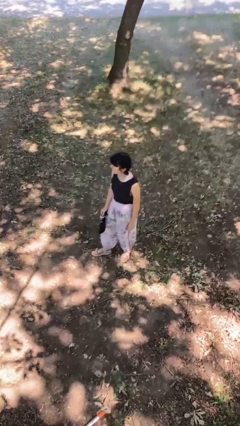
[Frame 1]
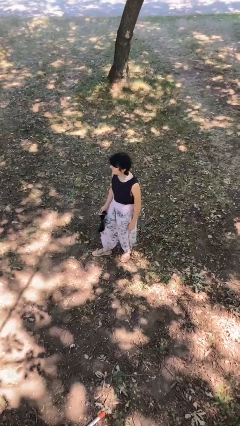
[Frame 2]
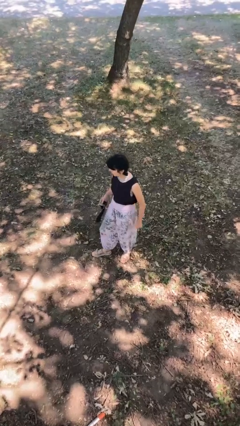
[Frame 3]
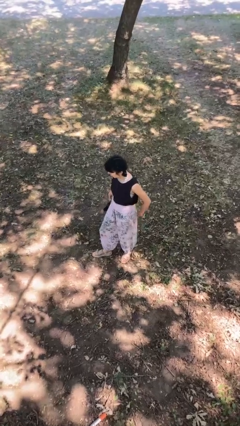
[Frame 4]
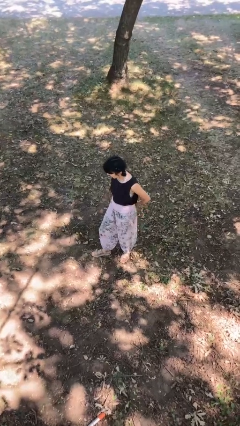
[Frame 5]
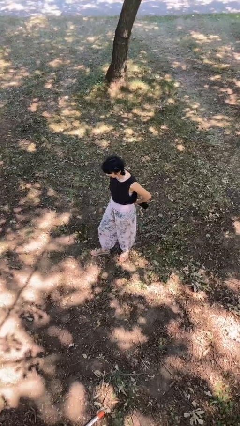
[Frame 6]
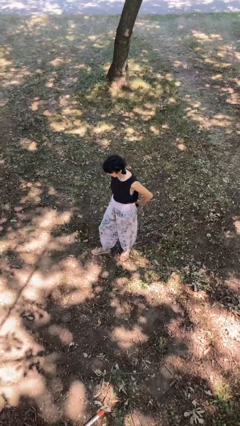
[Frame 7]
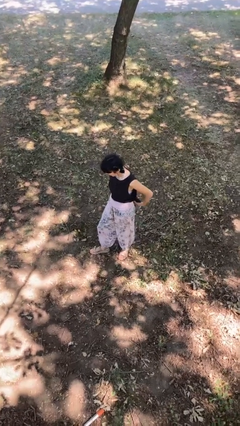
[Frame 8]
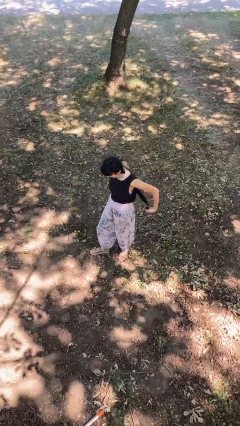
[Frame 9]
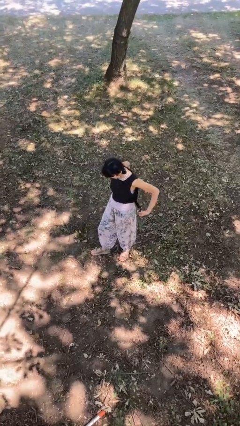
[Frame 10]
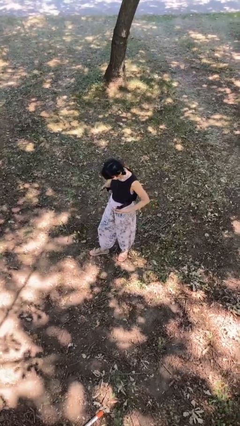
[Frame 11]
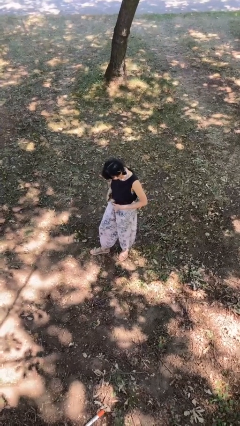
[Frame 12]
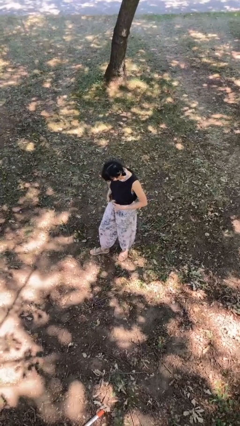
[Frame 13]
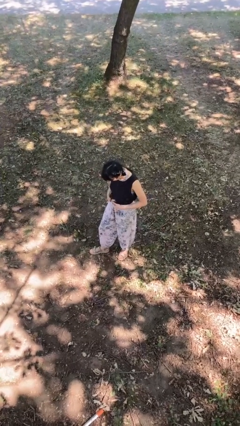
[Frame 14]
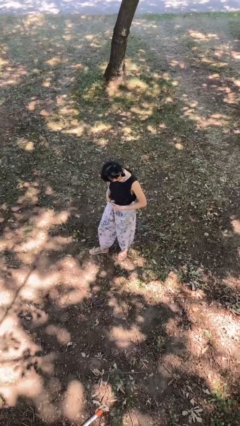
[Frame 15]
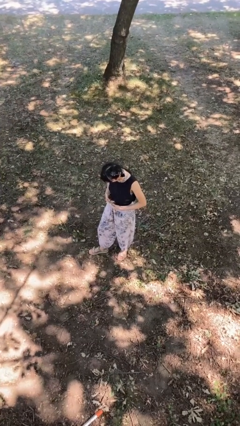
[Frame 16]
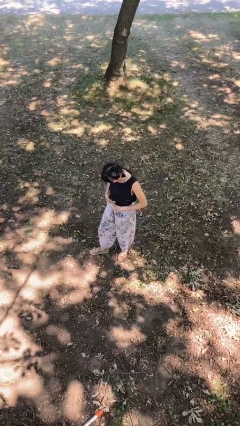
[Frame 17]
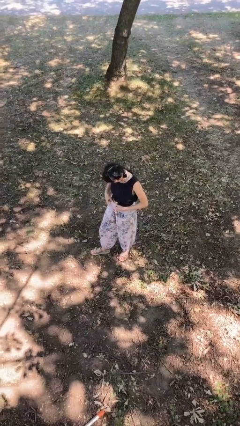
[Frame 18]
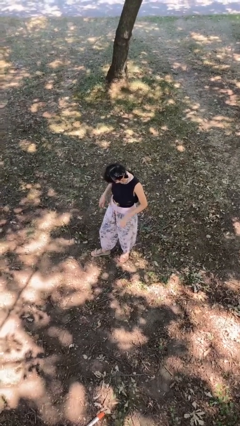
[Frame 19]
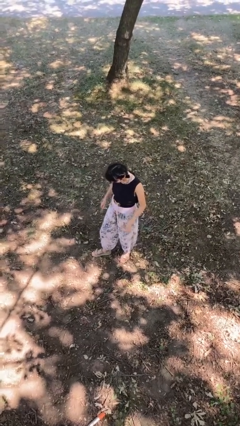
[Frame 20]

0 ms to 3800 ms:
person puts on belt

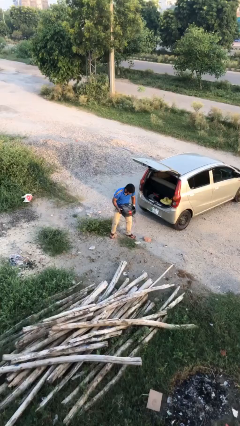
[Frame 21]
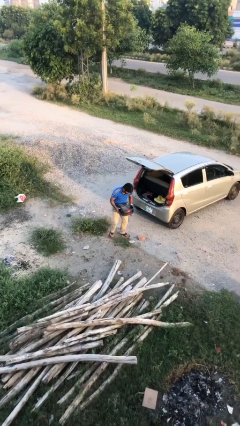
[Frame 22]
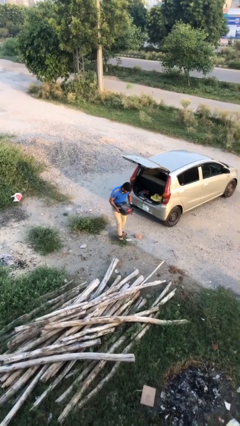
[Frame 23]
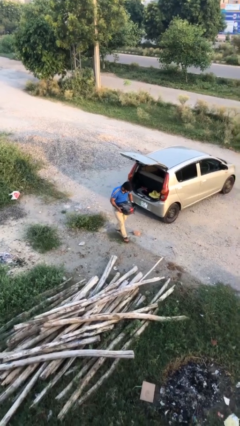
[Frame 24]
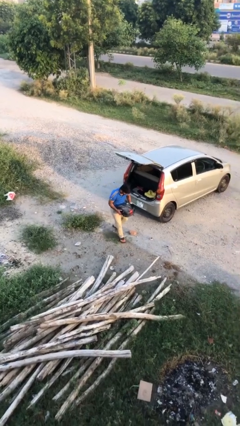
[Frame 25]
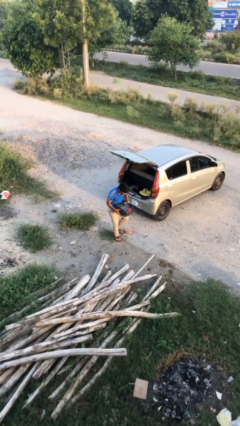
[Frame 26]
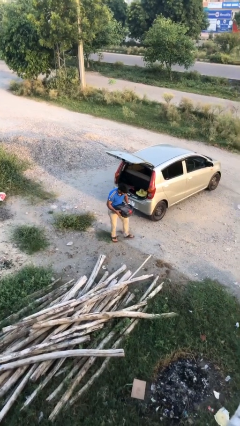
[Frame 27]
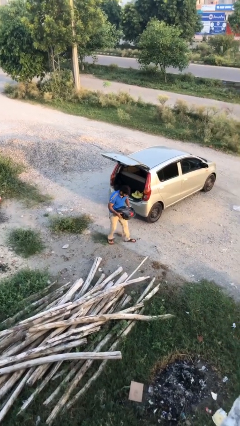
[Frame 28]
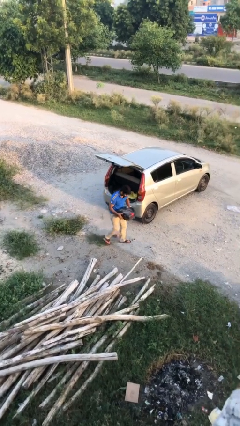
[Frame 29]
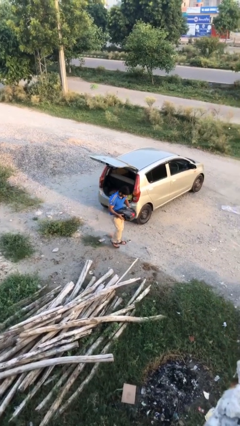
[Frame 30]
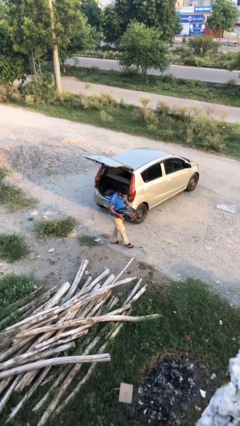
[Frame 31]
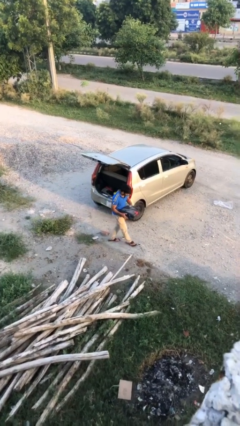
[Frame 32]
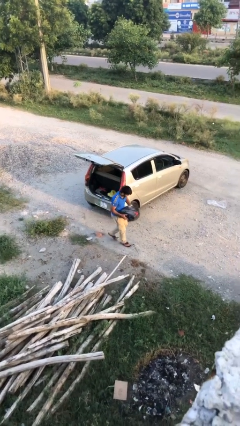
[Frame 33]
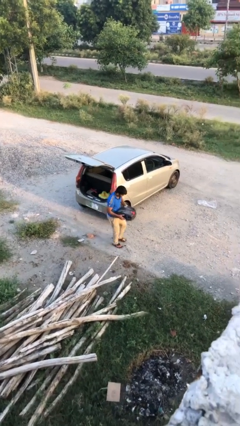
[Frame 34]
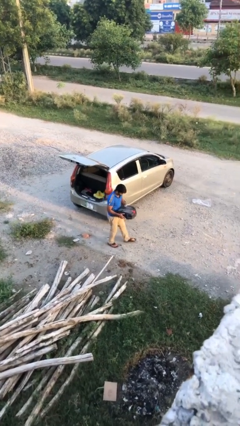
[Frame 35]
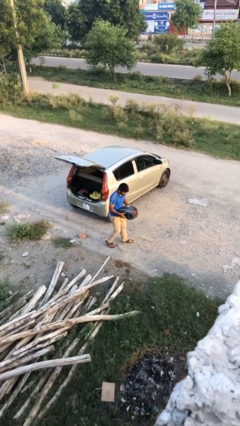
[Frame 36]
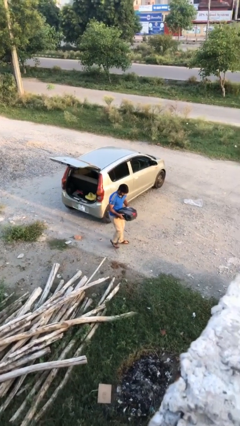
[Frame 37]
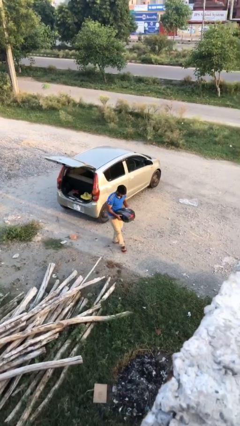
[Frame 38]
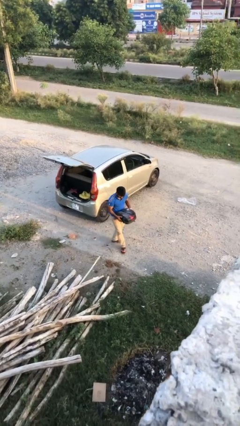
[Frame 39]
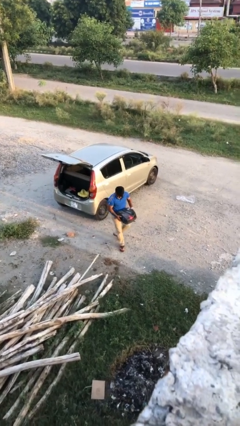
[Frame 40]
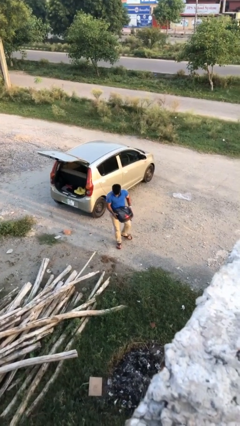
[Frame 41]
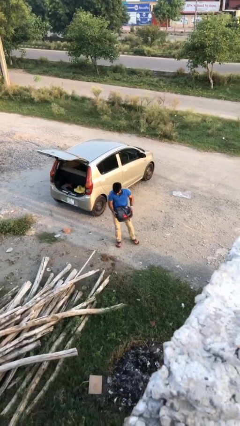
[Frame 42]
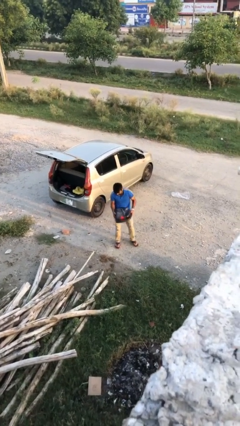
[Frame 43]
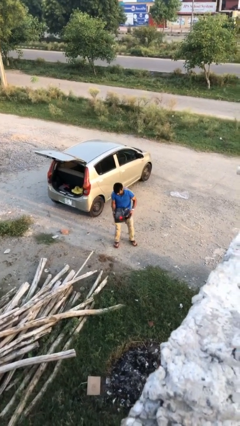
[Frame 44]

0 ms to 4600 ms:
person carries heavy object

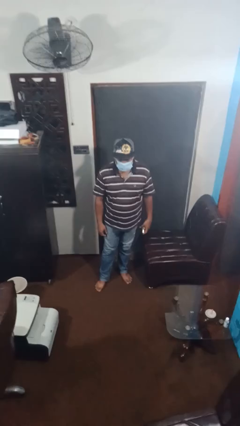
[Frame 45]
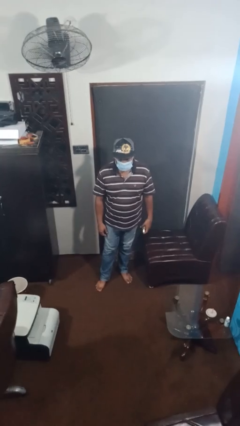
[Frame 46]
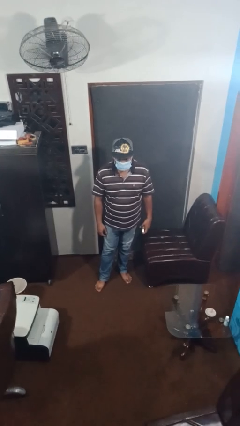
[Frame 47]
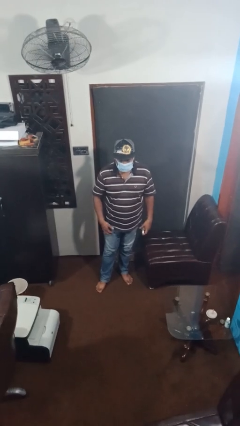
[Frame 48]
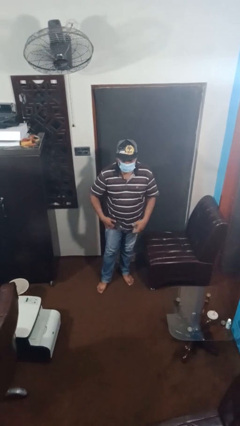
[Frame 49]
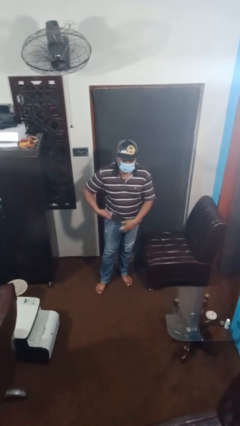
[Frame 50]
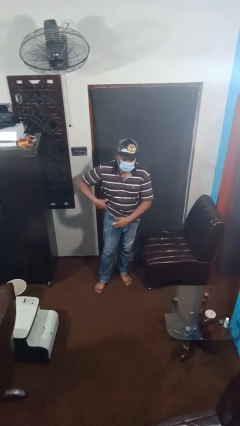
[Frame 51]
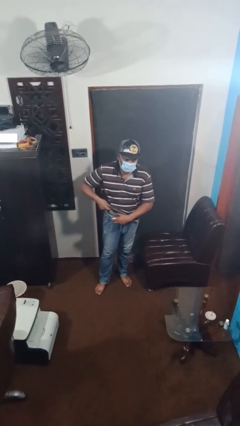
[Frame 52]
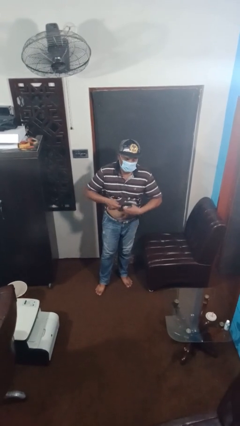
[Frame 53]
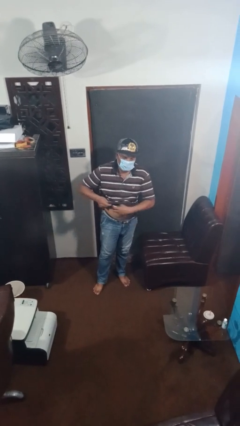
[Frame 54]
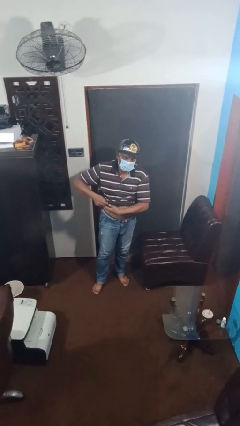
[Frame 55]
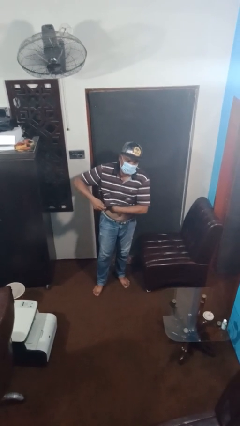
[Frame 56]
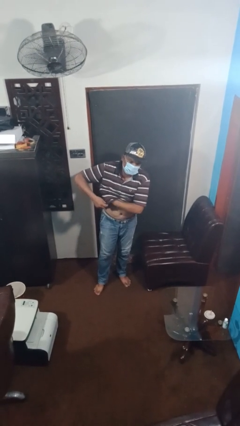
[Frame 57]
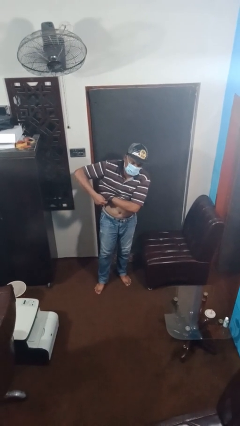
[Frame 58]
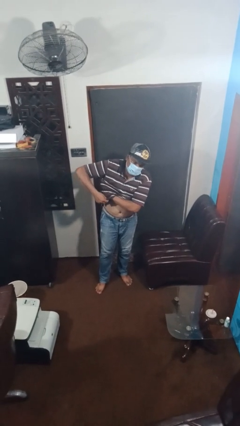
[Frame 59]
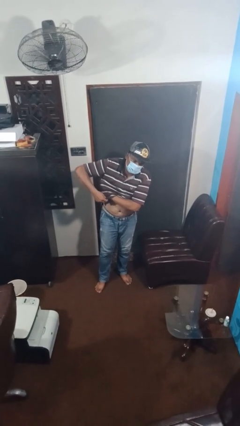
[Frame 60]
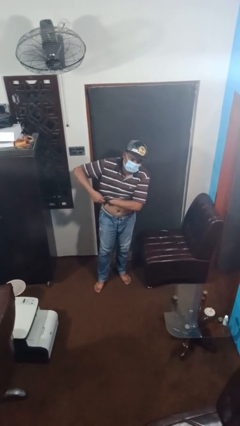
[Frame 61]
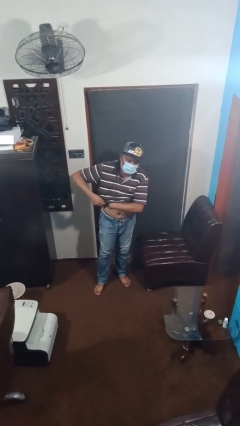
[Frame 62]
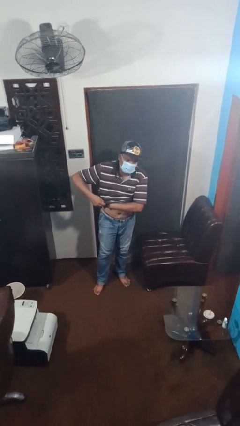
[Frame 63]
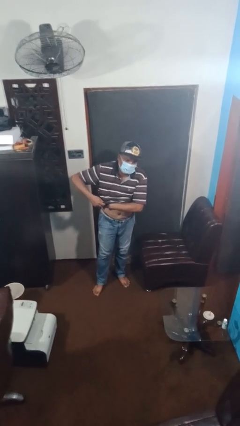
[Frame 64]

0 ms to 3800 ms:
person applies deodorant

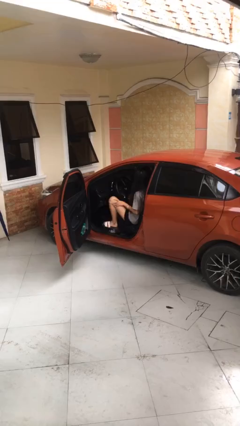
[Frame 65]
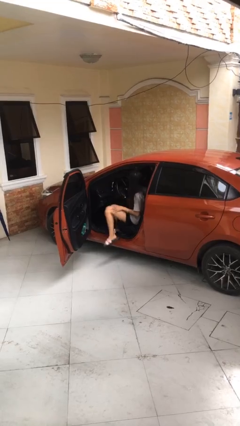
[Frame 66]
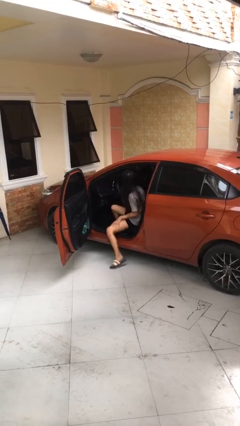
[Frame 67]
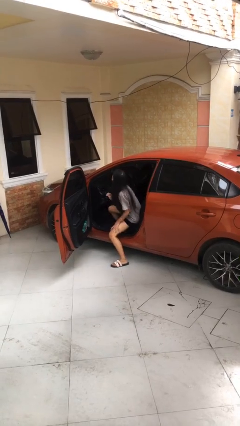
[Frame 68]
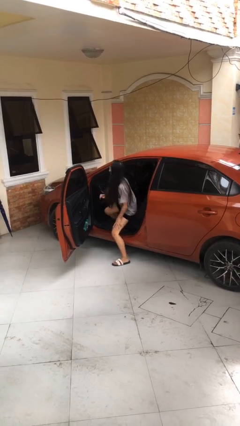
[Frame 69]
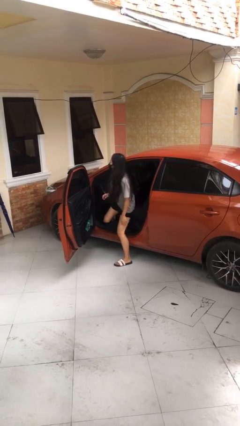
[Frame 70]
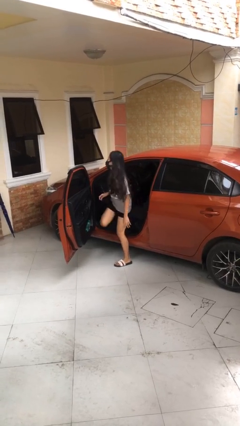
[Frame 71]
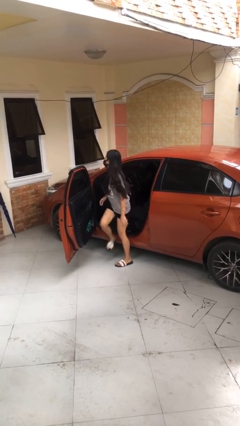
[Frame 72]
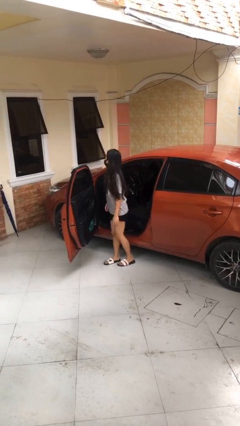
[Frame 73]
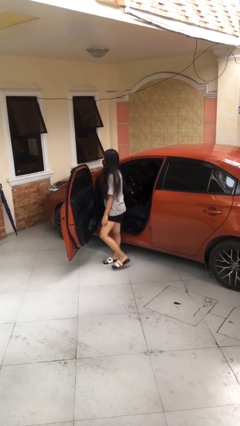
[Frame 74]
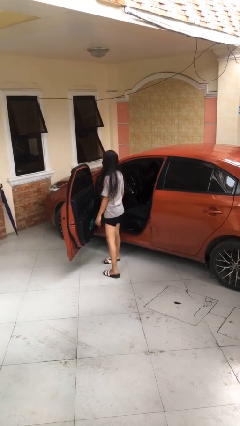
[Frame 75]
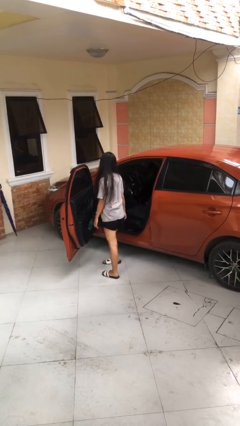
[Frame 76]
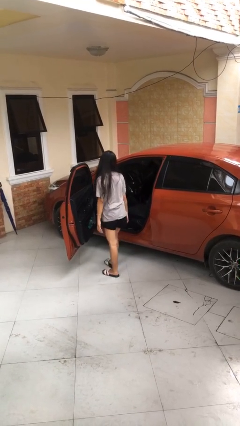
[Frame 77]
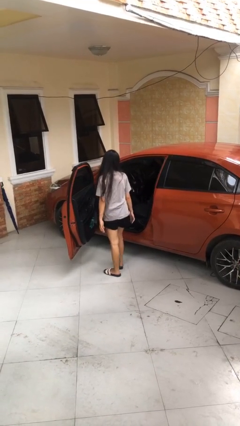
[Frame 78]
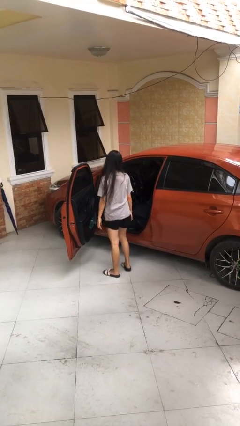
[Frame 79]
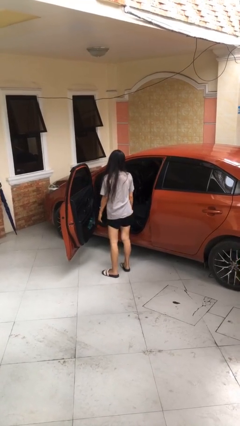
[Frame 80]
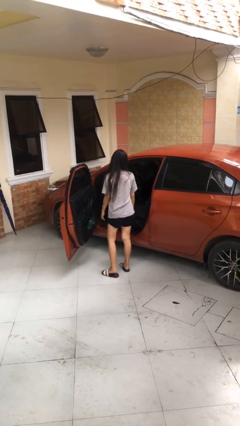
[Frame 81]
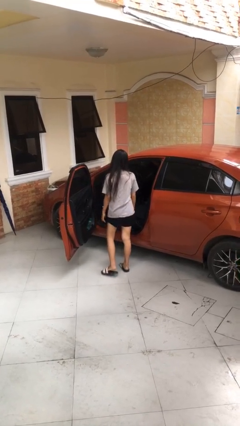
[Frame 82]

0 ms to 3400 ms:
person exits car

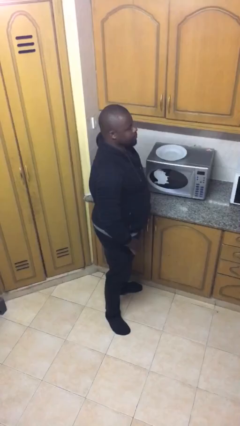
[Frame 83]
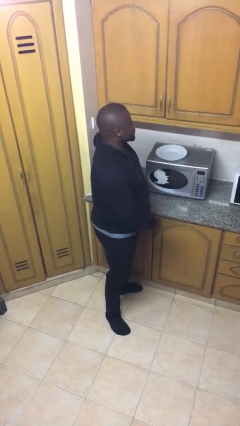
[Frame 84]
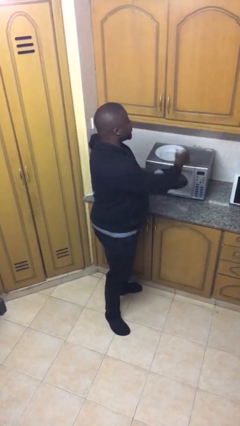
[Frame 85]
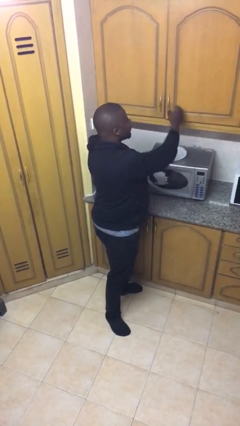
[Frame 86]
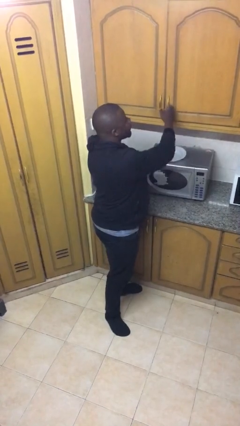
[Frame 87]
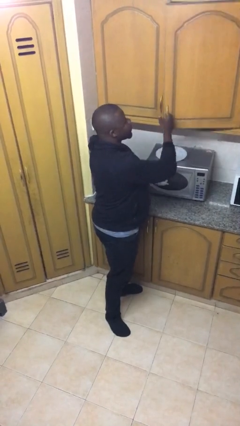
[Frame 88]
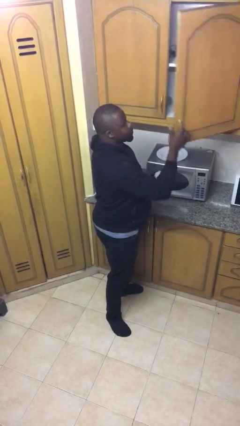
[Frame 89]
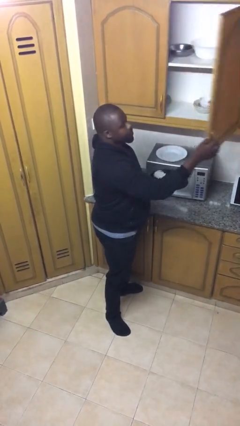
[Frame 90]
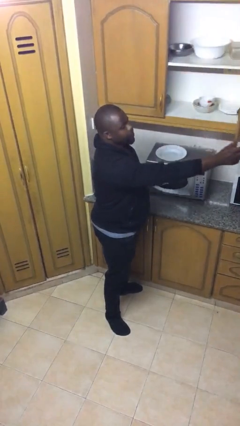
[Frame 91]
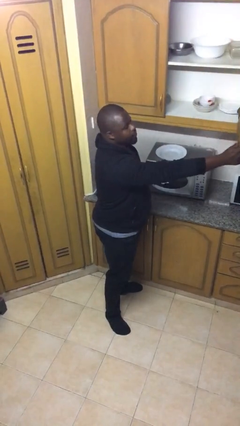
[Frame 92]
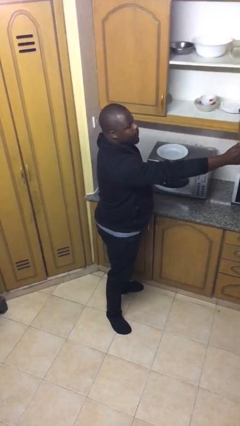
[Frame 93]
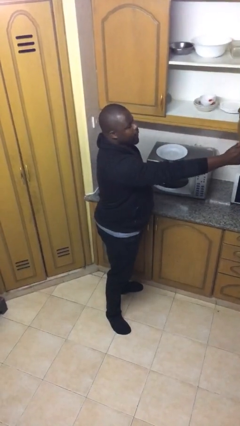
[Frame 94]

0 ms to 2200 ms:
person opens cabinet
